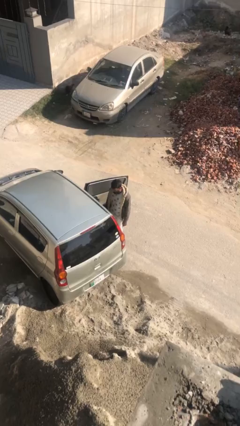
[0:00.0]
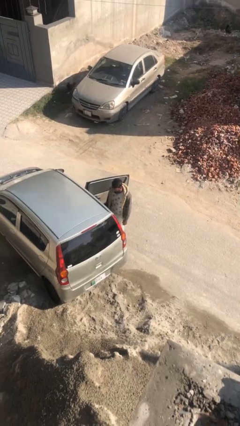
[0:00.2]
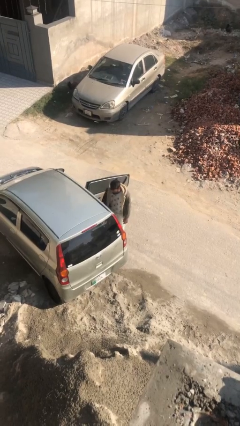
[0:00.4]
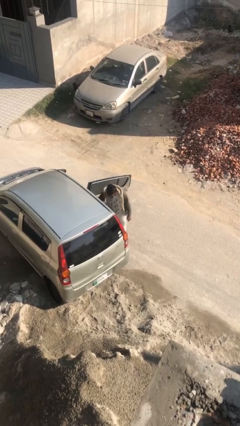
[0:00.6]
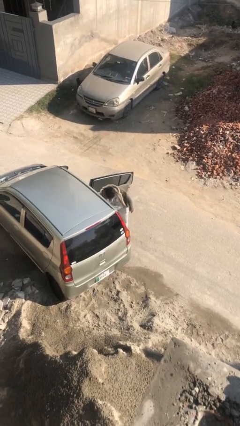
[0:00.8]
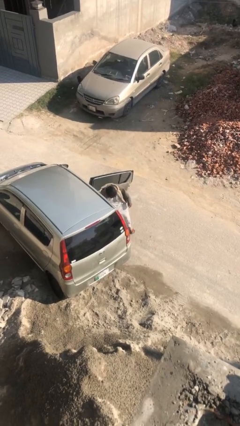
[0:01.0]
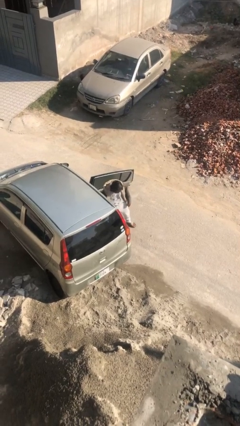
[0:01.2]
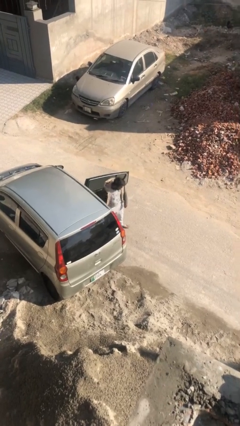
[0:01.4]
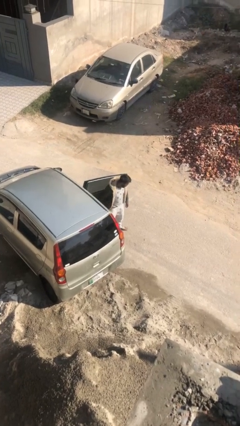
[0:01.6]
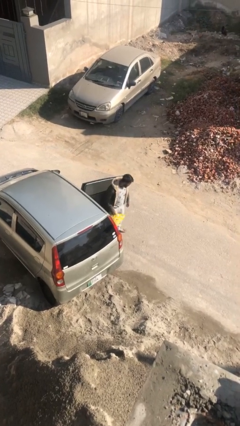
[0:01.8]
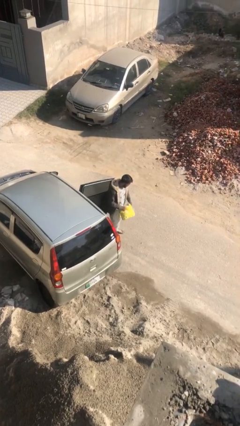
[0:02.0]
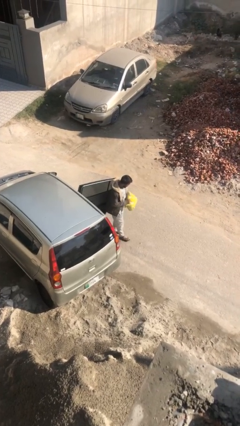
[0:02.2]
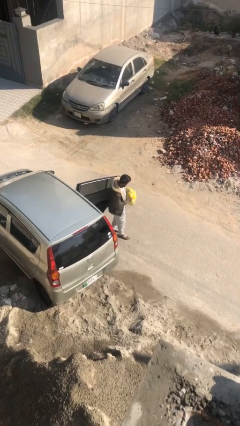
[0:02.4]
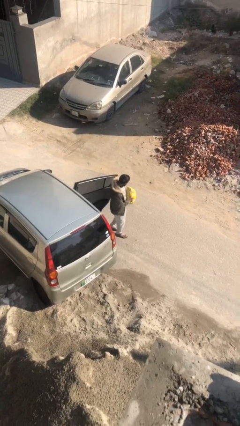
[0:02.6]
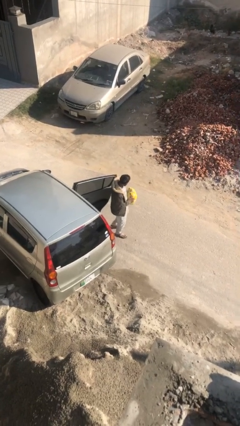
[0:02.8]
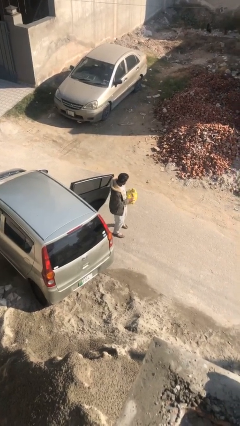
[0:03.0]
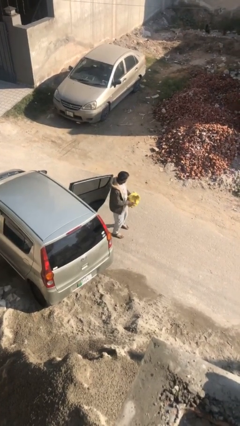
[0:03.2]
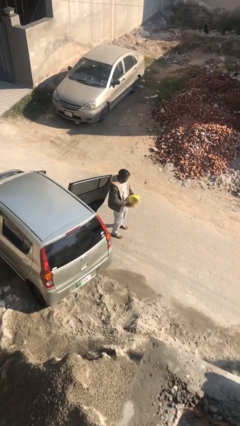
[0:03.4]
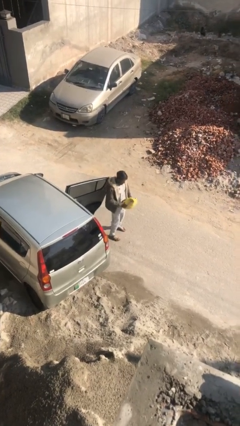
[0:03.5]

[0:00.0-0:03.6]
person unloads car

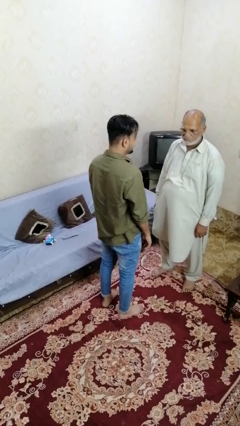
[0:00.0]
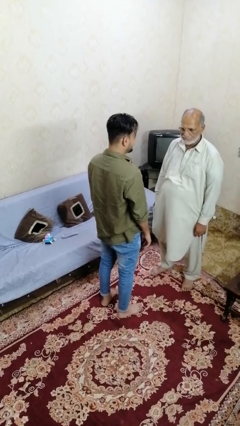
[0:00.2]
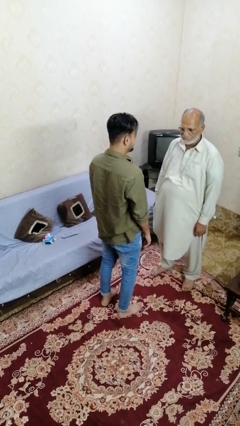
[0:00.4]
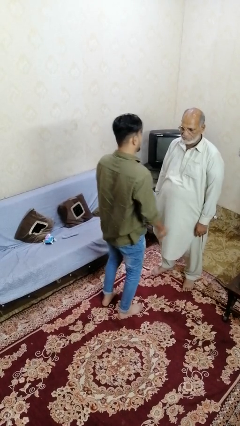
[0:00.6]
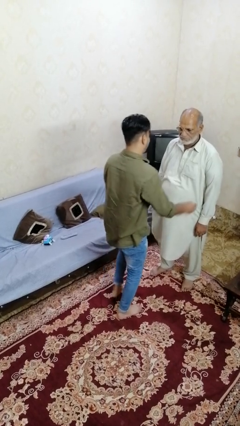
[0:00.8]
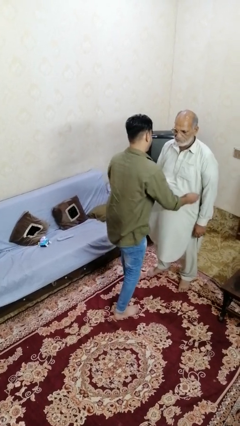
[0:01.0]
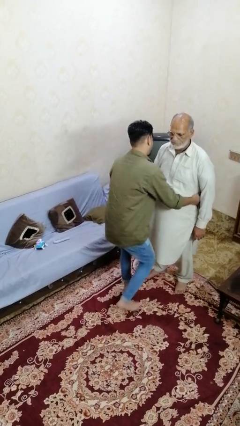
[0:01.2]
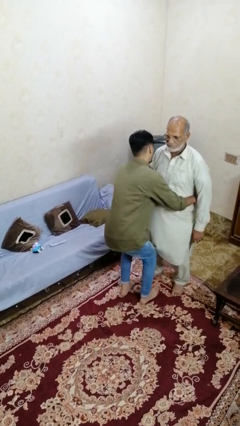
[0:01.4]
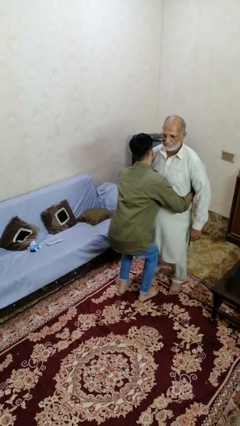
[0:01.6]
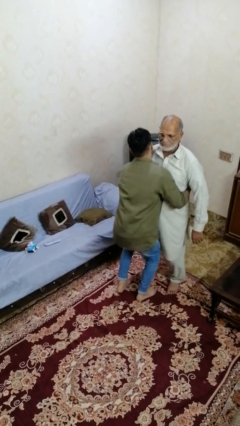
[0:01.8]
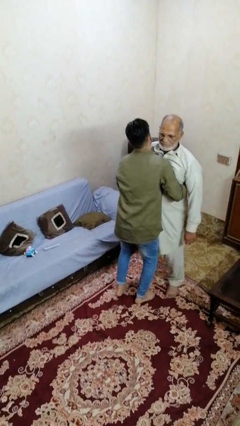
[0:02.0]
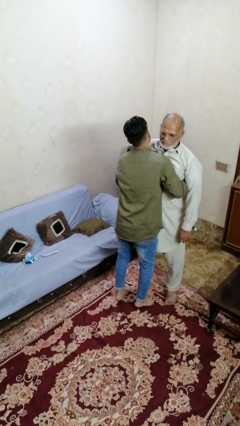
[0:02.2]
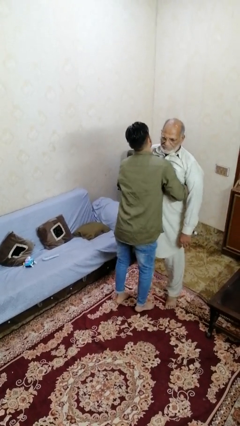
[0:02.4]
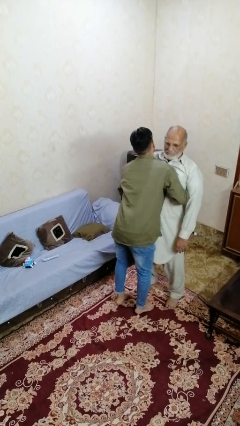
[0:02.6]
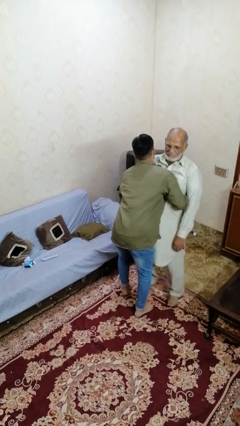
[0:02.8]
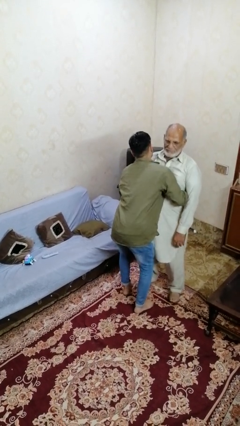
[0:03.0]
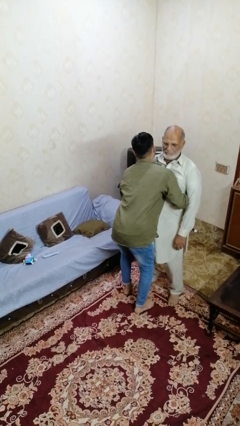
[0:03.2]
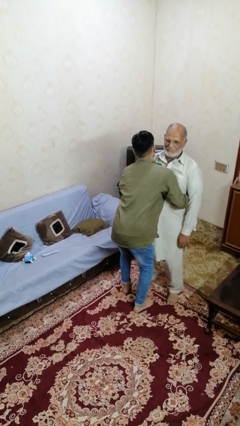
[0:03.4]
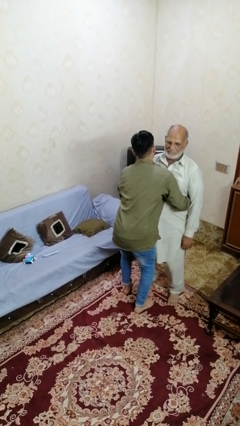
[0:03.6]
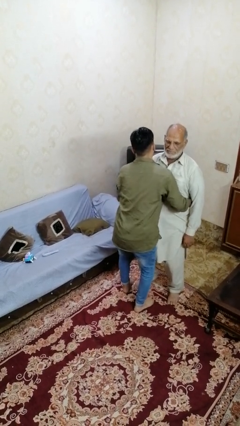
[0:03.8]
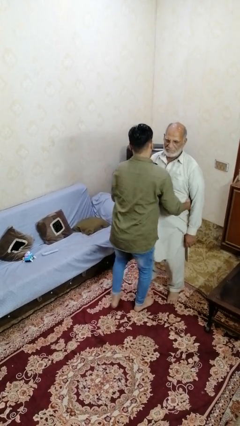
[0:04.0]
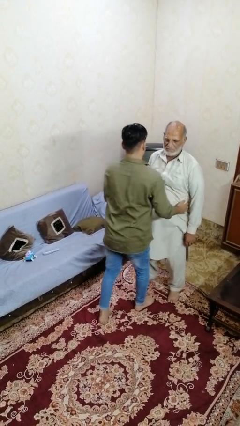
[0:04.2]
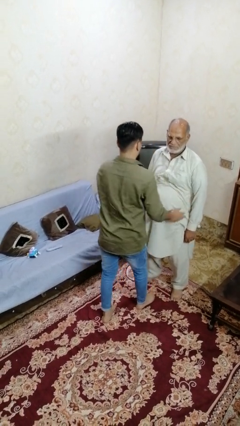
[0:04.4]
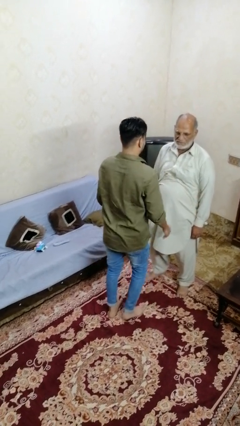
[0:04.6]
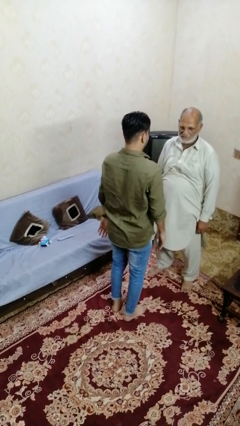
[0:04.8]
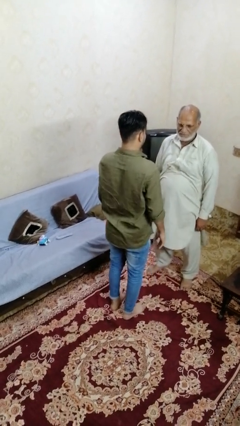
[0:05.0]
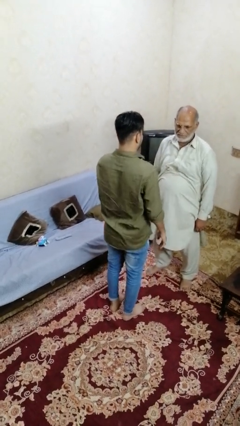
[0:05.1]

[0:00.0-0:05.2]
person pounds shoulders of person

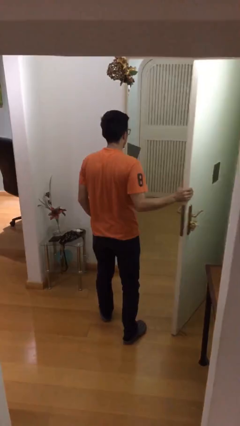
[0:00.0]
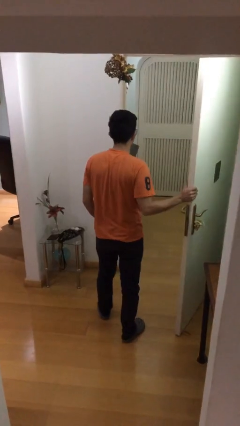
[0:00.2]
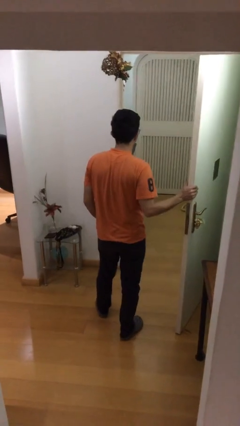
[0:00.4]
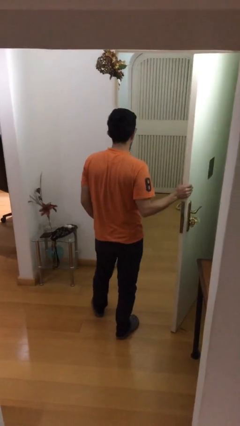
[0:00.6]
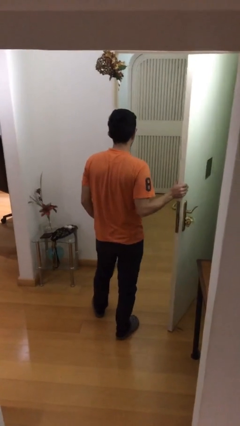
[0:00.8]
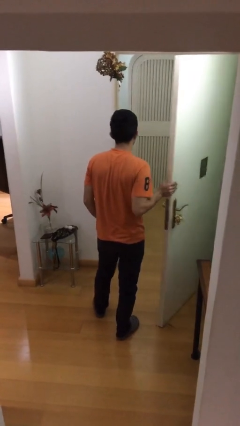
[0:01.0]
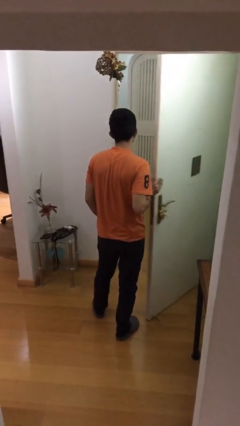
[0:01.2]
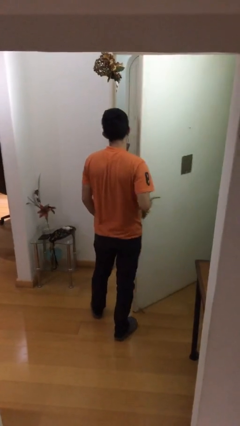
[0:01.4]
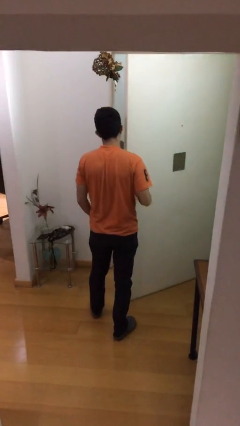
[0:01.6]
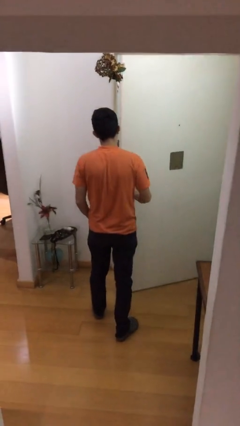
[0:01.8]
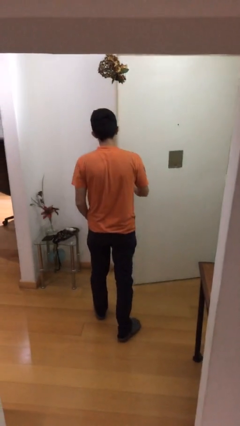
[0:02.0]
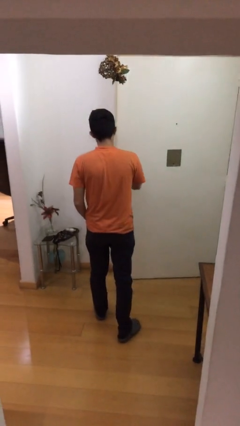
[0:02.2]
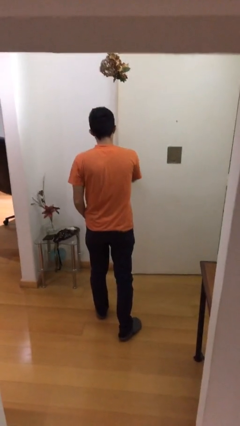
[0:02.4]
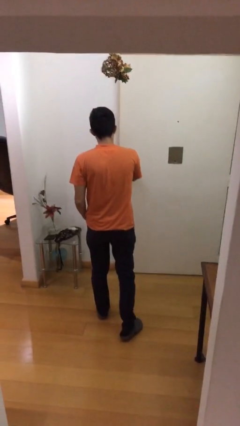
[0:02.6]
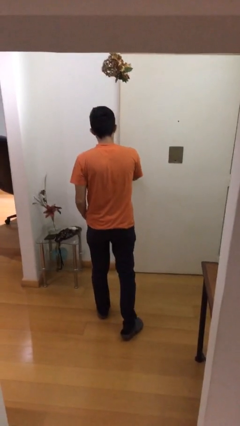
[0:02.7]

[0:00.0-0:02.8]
person closes facility door

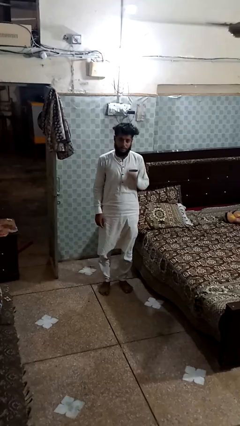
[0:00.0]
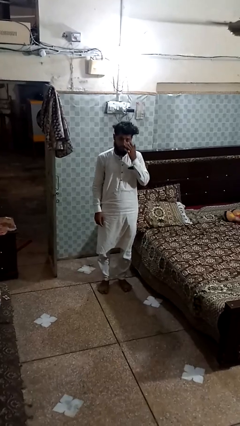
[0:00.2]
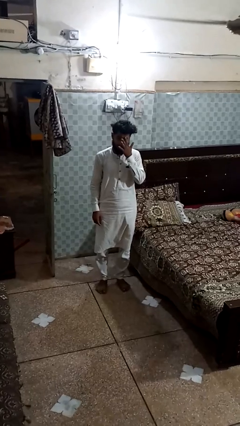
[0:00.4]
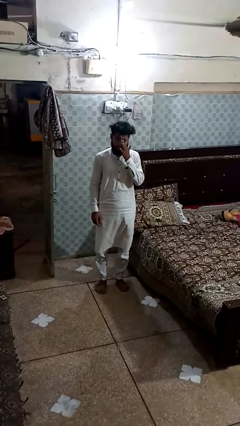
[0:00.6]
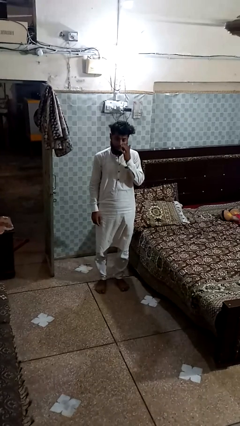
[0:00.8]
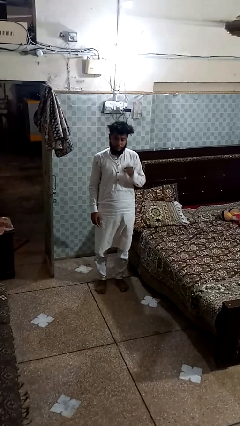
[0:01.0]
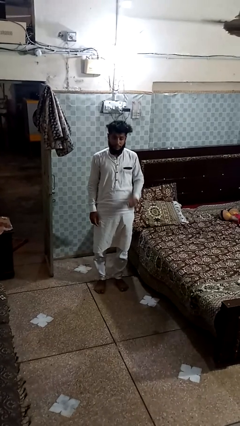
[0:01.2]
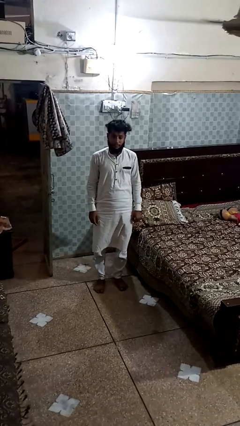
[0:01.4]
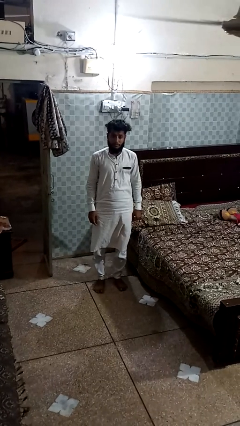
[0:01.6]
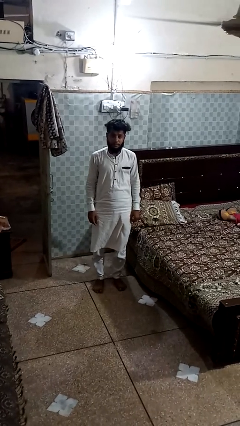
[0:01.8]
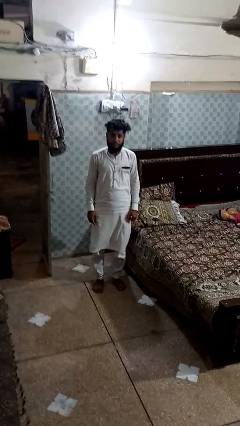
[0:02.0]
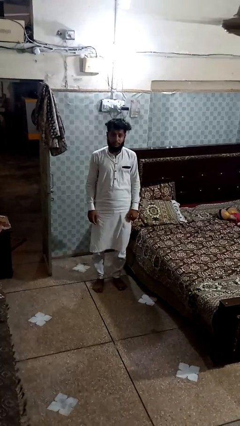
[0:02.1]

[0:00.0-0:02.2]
person exercises with plank

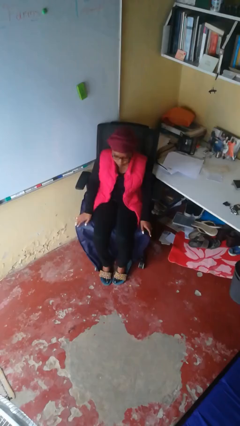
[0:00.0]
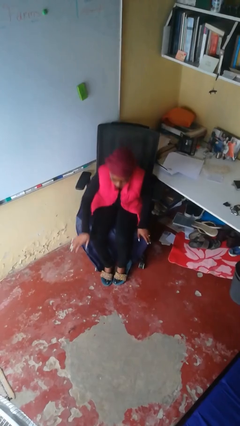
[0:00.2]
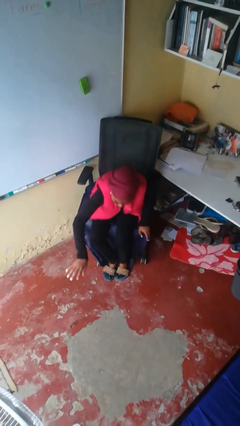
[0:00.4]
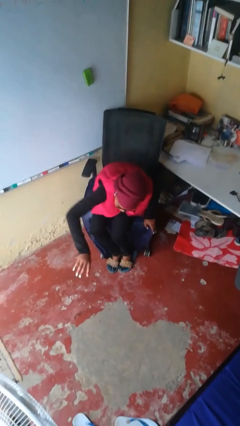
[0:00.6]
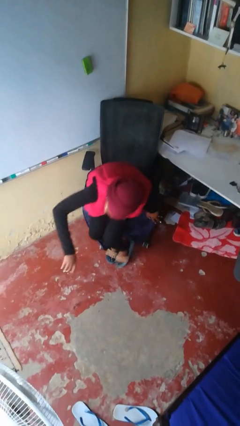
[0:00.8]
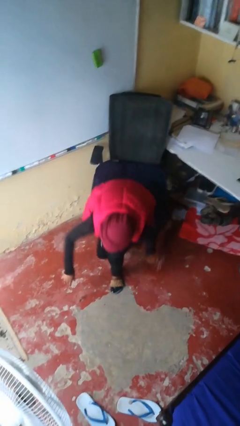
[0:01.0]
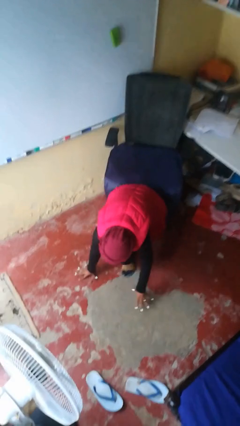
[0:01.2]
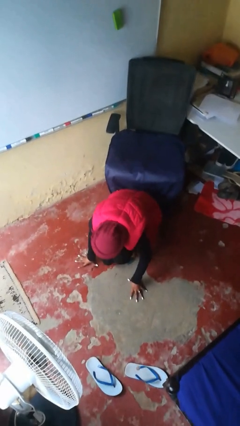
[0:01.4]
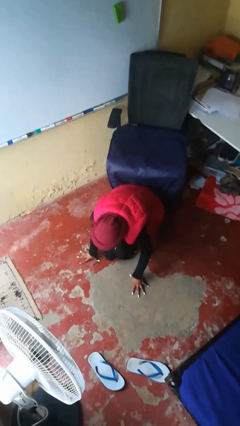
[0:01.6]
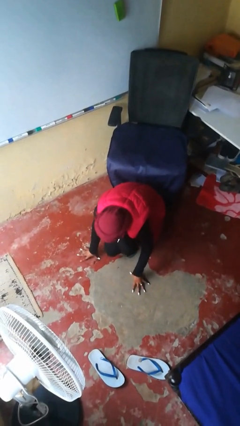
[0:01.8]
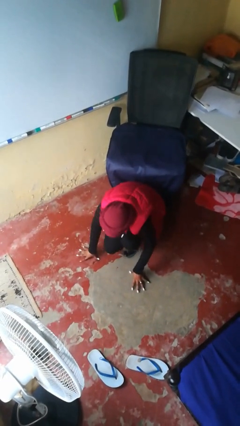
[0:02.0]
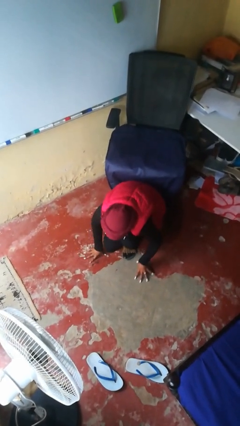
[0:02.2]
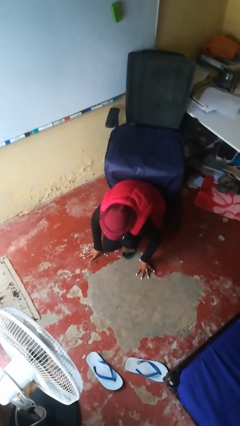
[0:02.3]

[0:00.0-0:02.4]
person falls from chair

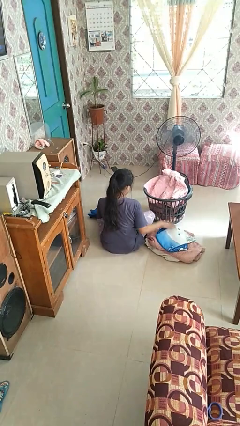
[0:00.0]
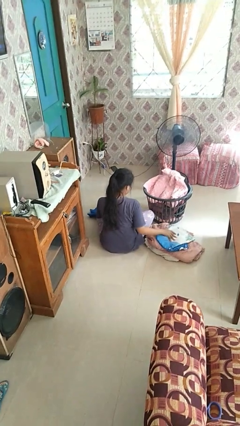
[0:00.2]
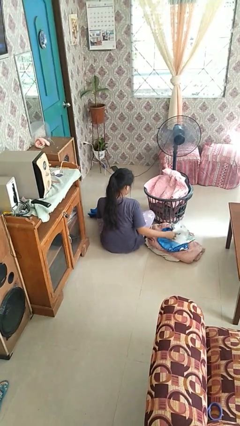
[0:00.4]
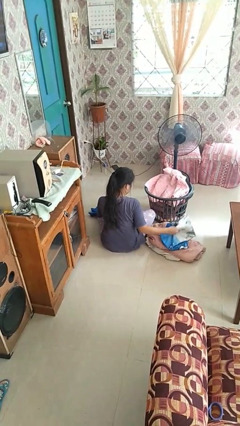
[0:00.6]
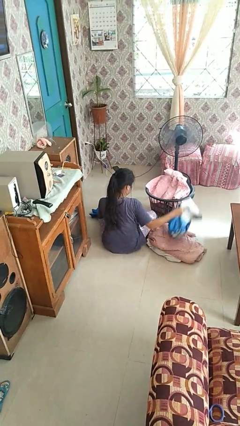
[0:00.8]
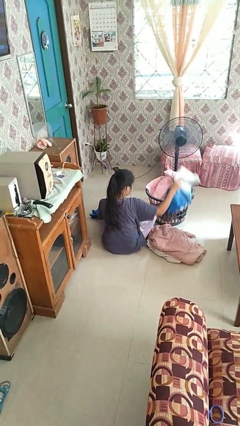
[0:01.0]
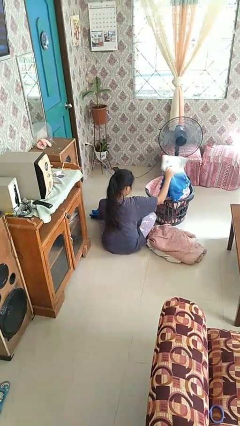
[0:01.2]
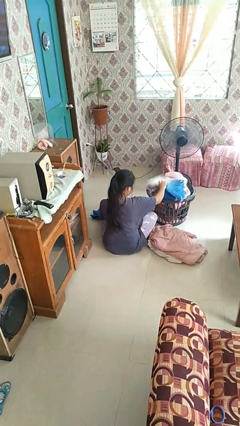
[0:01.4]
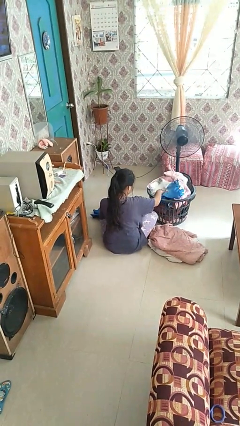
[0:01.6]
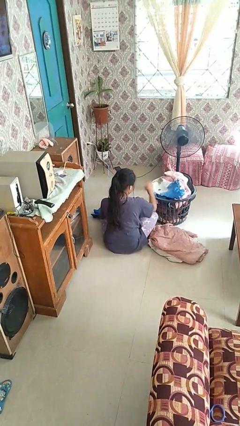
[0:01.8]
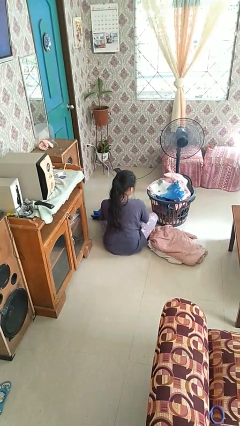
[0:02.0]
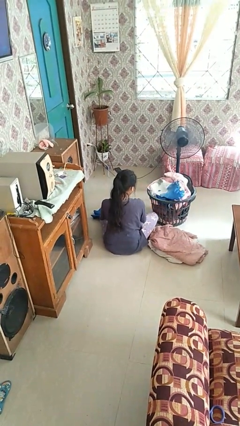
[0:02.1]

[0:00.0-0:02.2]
person puts object into basket
